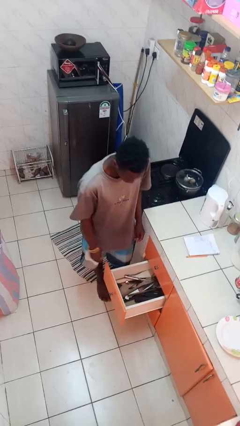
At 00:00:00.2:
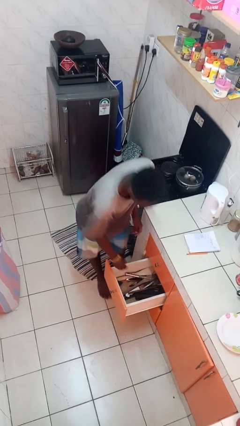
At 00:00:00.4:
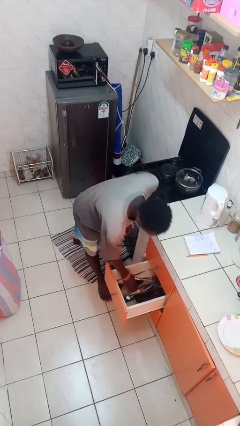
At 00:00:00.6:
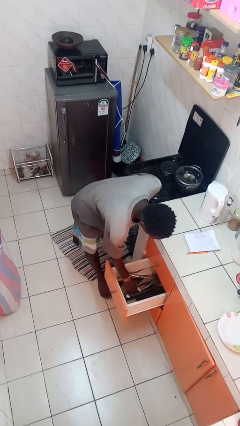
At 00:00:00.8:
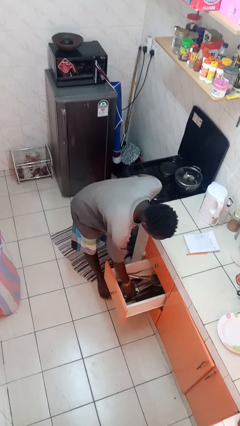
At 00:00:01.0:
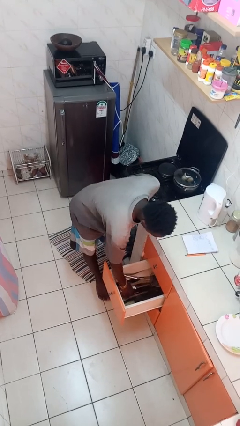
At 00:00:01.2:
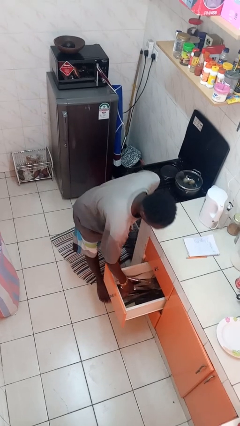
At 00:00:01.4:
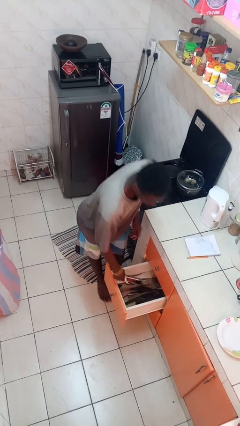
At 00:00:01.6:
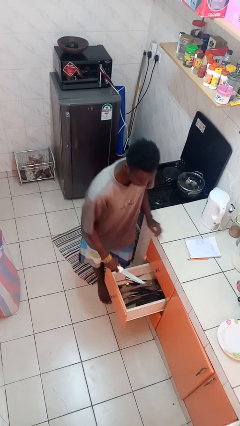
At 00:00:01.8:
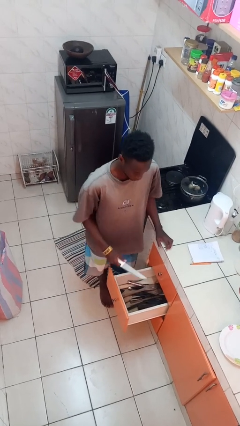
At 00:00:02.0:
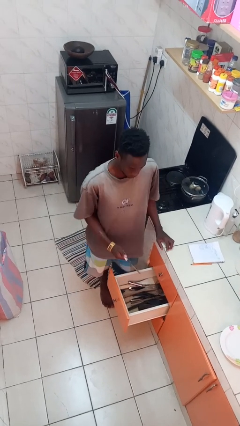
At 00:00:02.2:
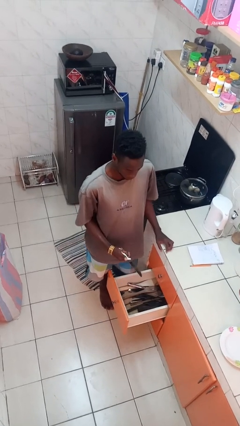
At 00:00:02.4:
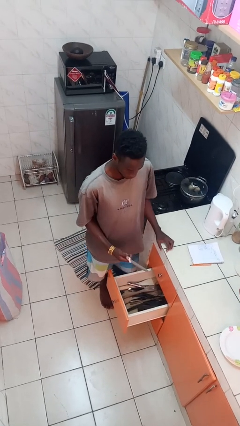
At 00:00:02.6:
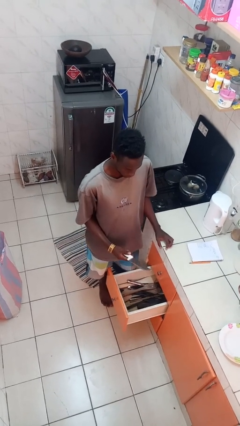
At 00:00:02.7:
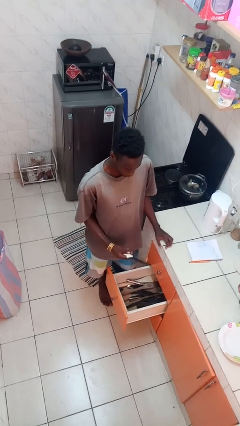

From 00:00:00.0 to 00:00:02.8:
person takes object from kitchen drawer

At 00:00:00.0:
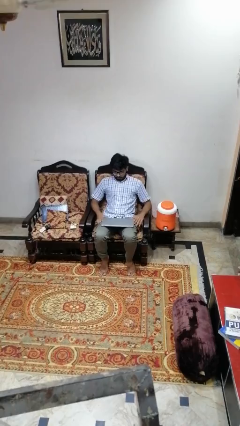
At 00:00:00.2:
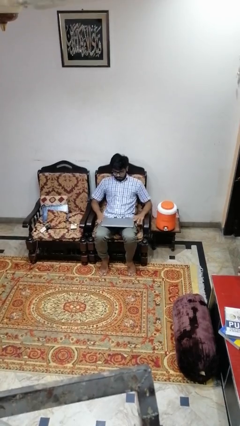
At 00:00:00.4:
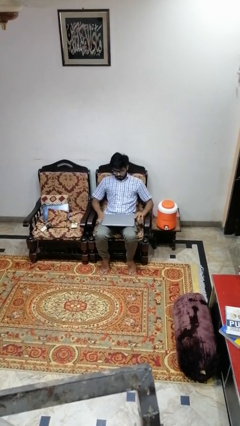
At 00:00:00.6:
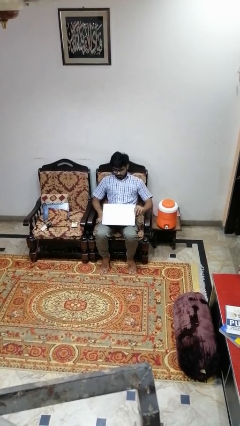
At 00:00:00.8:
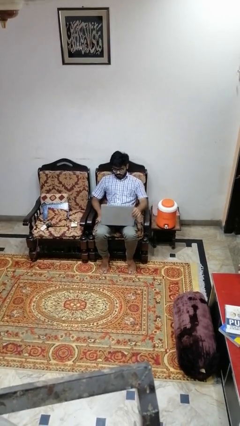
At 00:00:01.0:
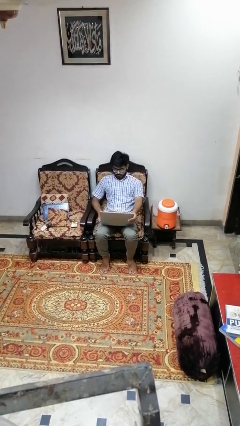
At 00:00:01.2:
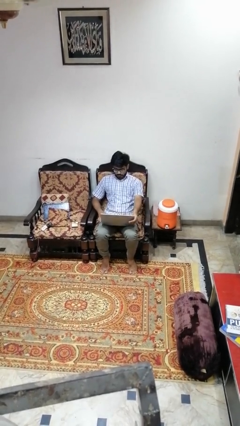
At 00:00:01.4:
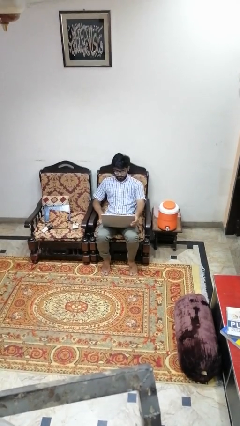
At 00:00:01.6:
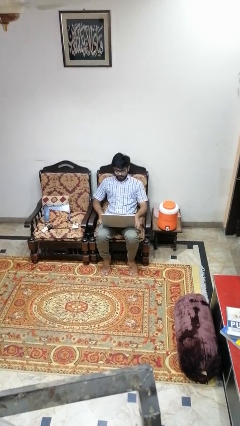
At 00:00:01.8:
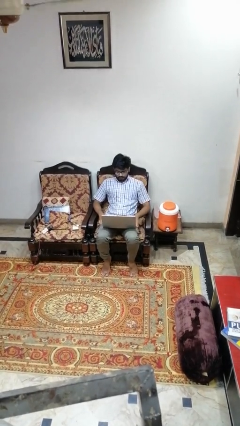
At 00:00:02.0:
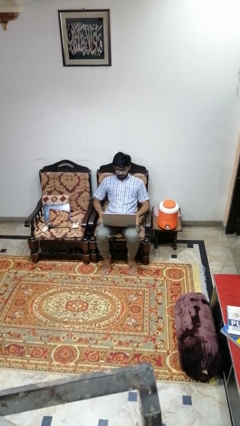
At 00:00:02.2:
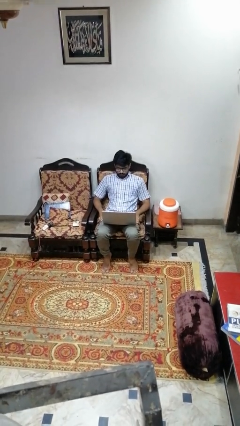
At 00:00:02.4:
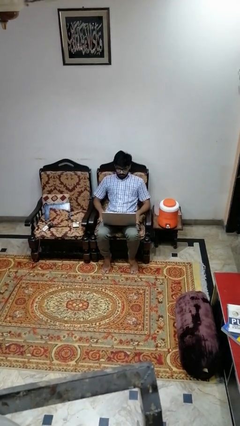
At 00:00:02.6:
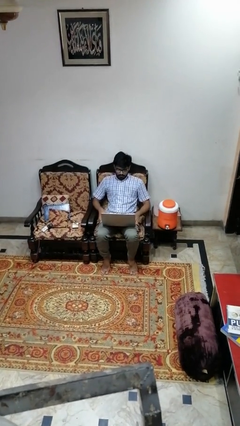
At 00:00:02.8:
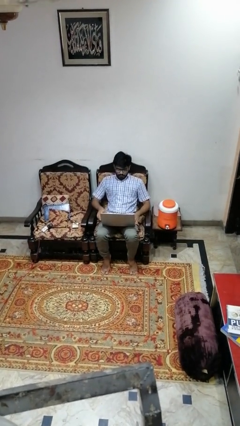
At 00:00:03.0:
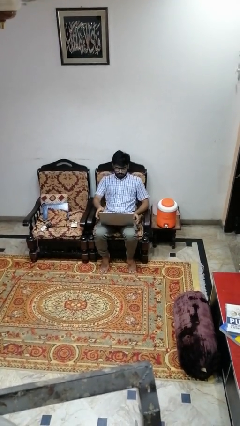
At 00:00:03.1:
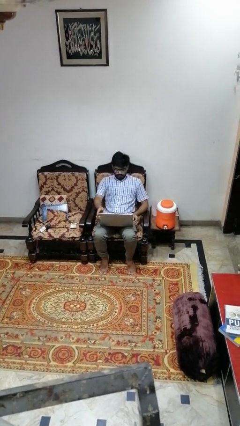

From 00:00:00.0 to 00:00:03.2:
person opens laptop

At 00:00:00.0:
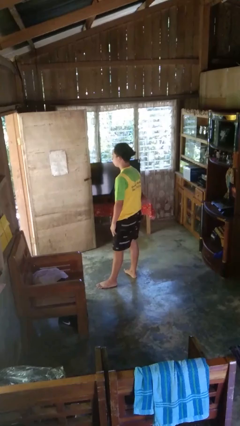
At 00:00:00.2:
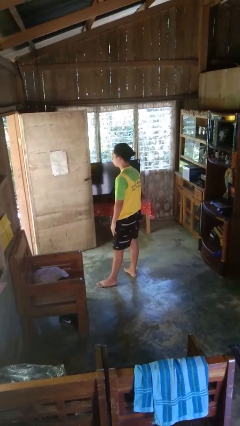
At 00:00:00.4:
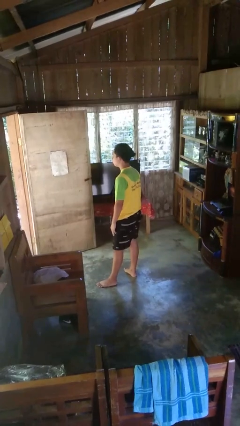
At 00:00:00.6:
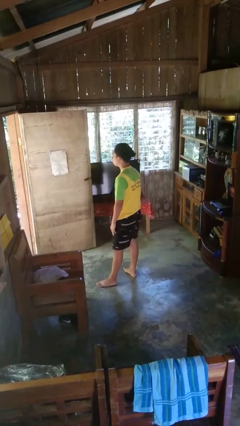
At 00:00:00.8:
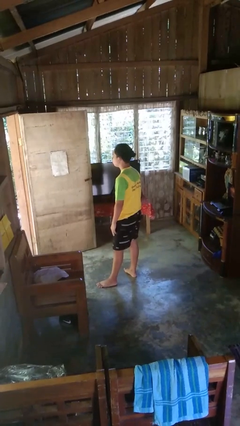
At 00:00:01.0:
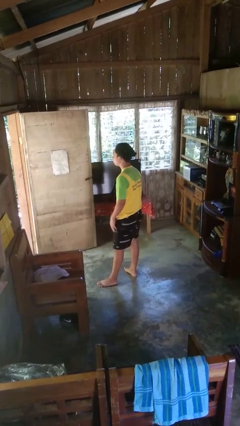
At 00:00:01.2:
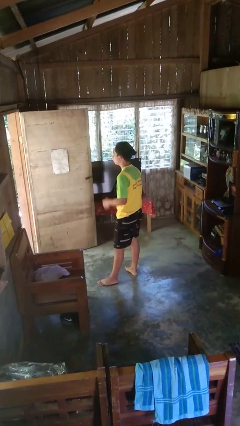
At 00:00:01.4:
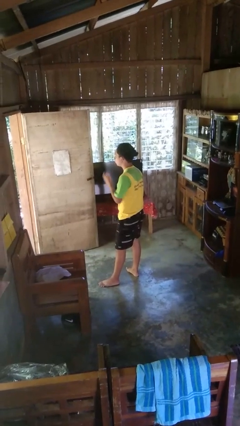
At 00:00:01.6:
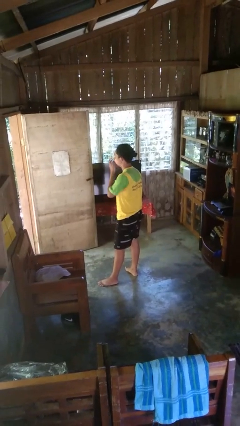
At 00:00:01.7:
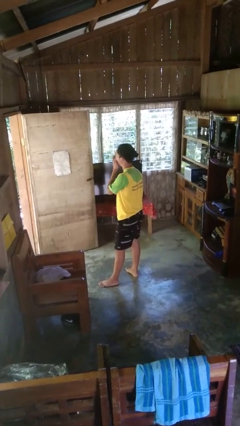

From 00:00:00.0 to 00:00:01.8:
person yawns

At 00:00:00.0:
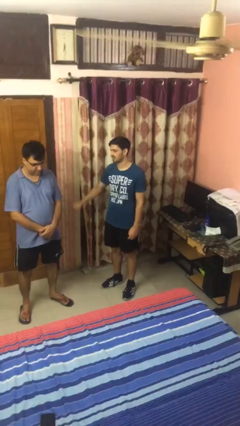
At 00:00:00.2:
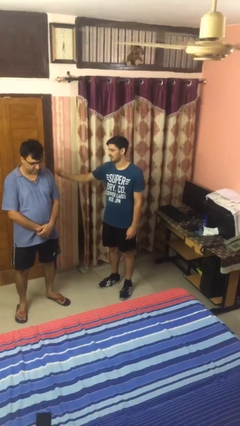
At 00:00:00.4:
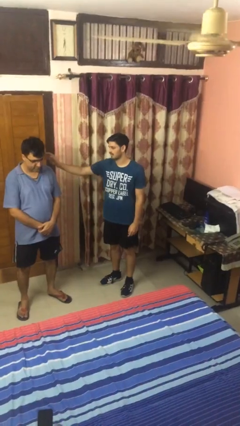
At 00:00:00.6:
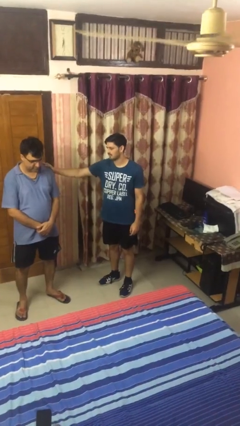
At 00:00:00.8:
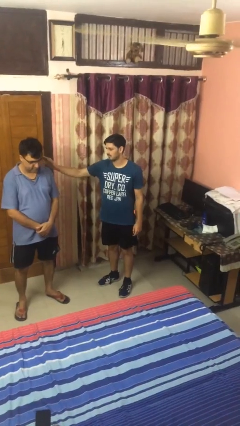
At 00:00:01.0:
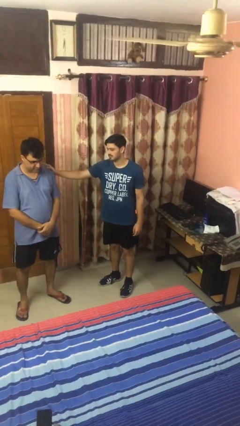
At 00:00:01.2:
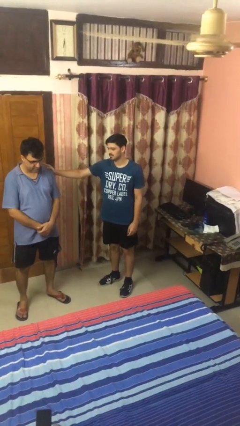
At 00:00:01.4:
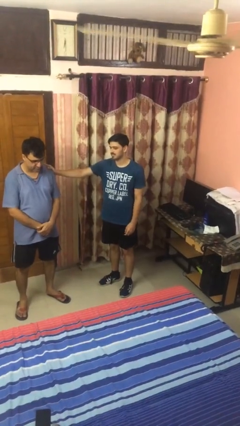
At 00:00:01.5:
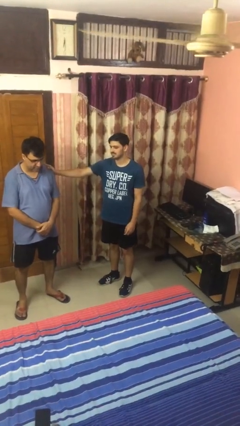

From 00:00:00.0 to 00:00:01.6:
person pounds shoulders of person

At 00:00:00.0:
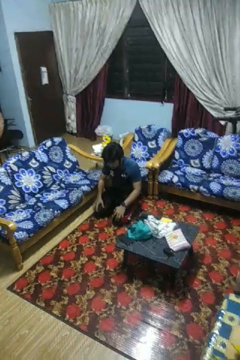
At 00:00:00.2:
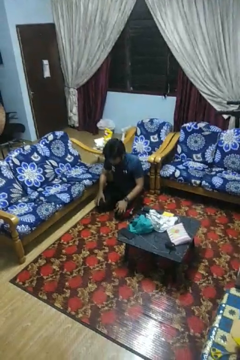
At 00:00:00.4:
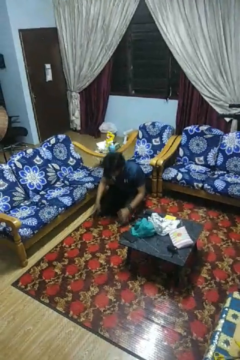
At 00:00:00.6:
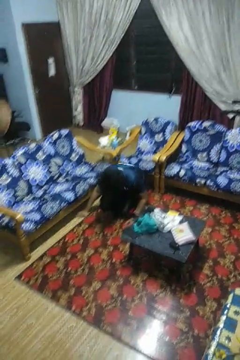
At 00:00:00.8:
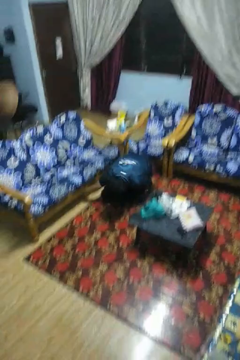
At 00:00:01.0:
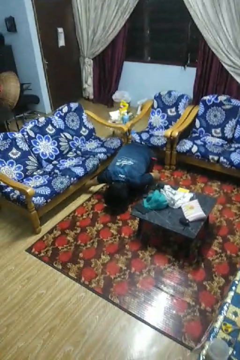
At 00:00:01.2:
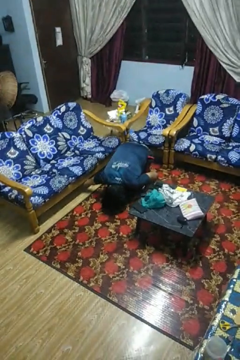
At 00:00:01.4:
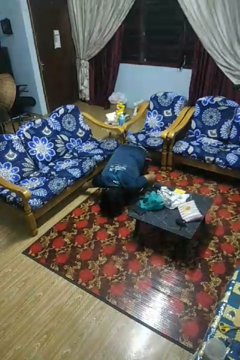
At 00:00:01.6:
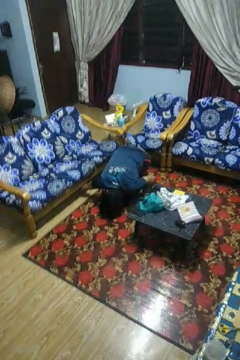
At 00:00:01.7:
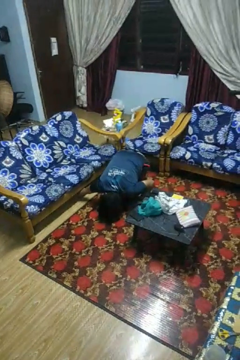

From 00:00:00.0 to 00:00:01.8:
person searches under couch

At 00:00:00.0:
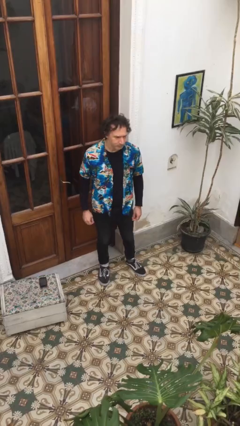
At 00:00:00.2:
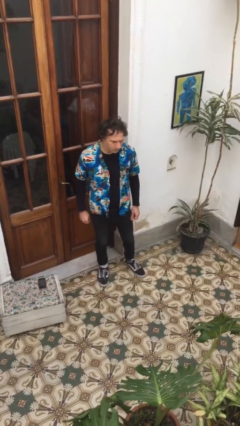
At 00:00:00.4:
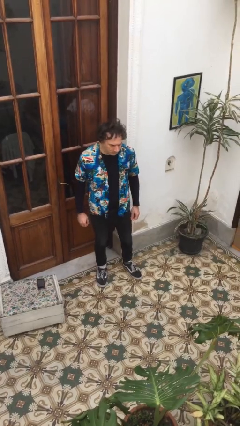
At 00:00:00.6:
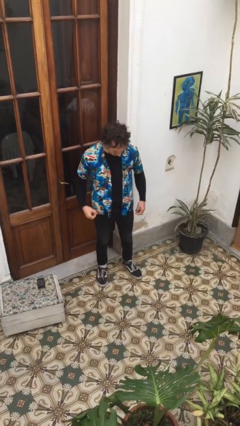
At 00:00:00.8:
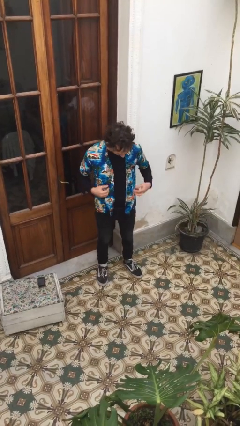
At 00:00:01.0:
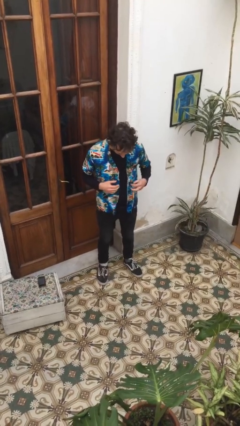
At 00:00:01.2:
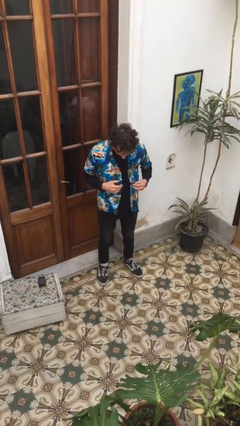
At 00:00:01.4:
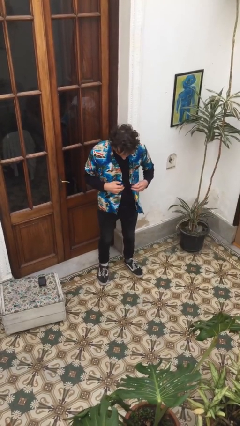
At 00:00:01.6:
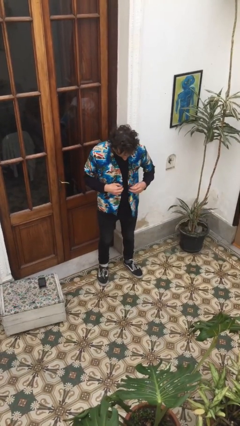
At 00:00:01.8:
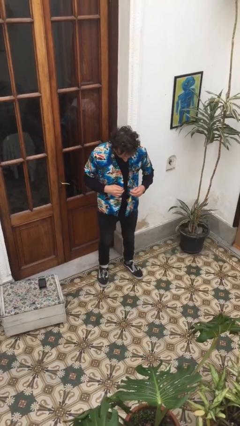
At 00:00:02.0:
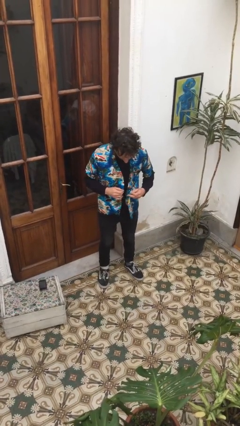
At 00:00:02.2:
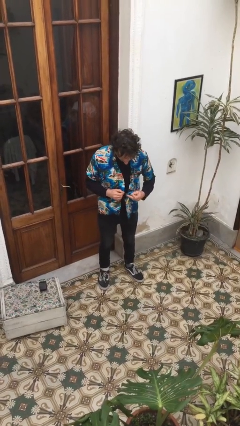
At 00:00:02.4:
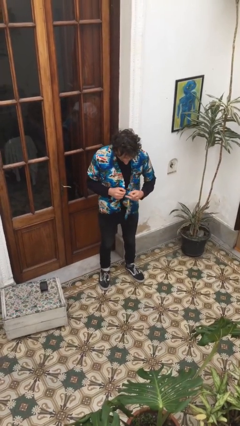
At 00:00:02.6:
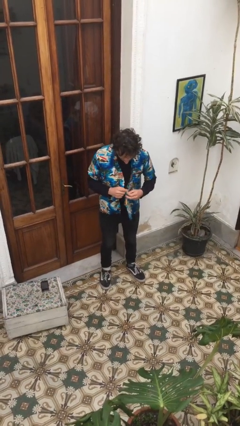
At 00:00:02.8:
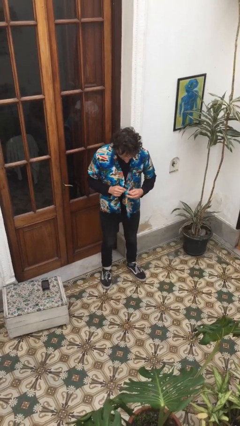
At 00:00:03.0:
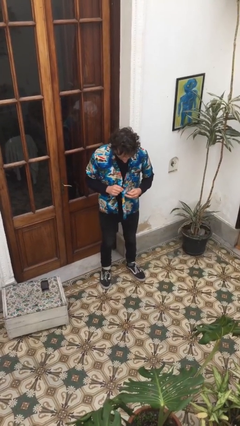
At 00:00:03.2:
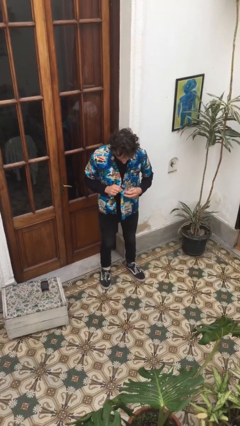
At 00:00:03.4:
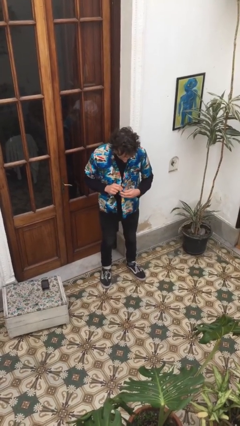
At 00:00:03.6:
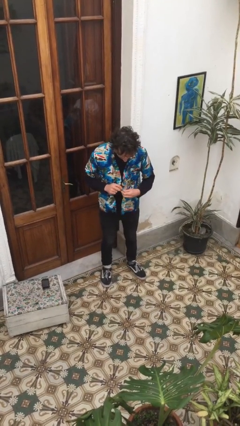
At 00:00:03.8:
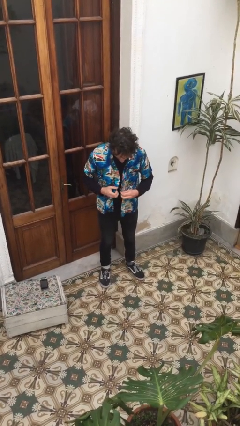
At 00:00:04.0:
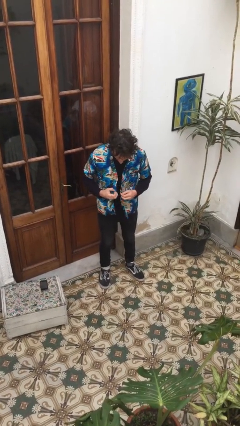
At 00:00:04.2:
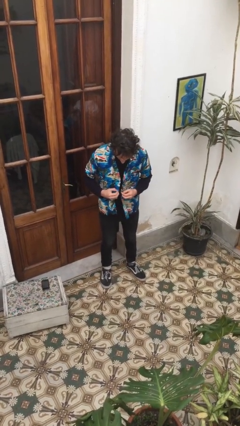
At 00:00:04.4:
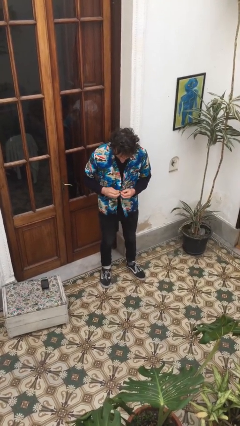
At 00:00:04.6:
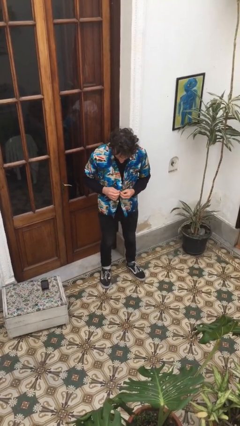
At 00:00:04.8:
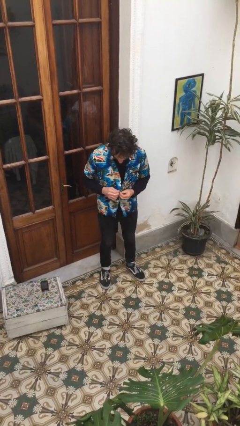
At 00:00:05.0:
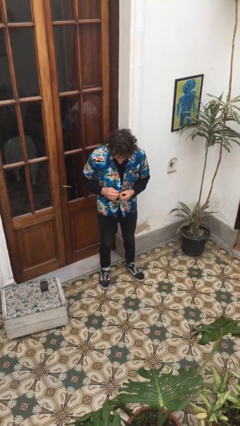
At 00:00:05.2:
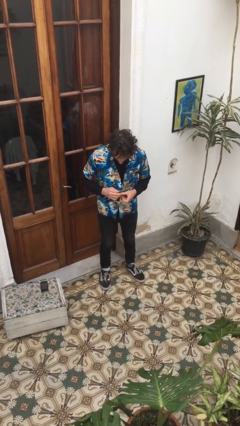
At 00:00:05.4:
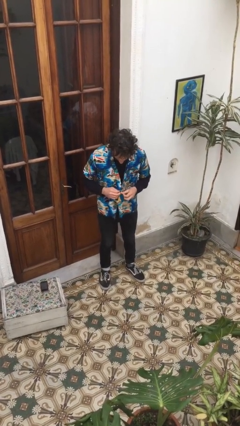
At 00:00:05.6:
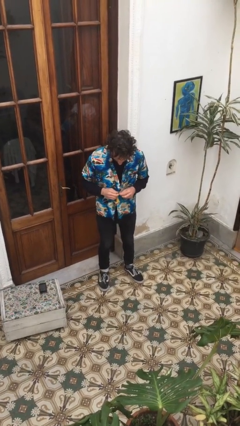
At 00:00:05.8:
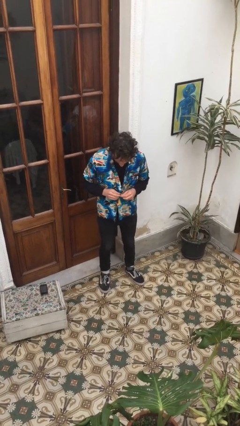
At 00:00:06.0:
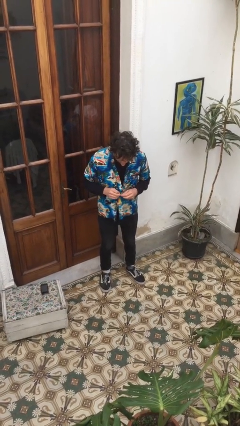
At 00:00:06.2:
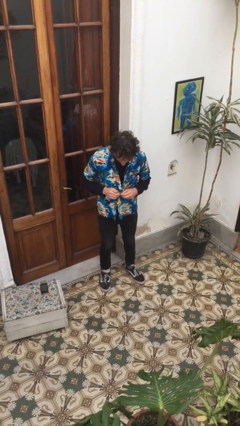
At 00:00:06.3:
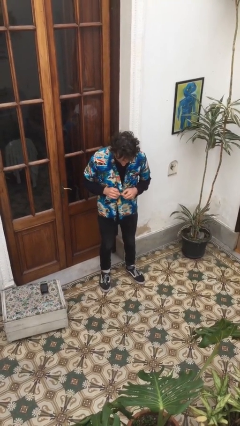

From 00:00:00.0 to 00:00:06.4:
person buttons shirt
